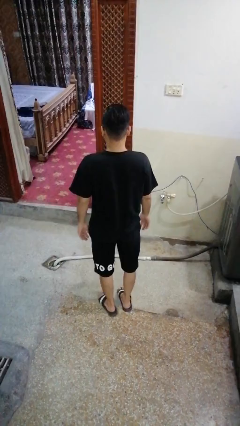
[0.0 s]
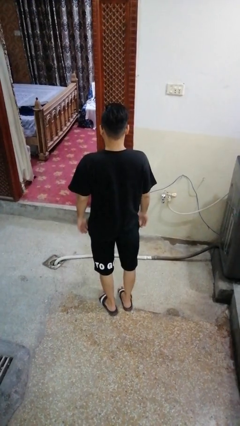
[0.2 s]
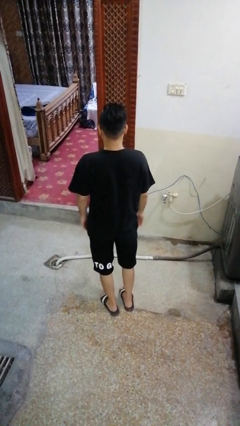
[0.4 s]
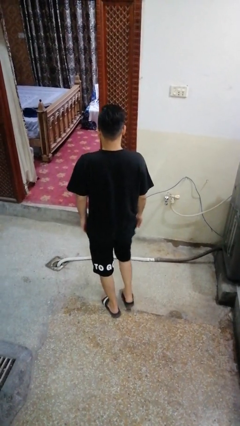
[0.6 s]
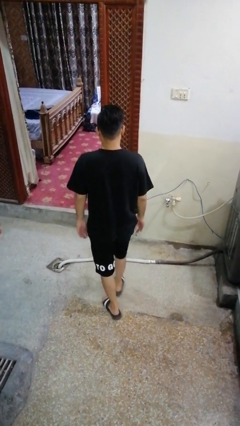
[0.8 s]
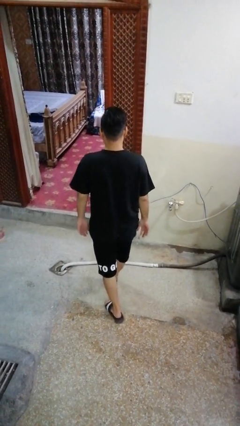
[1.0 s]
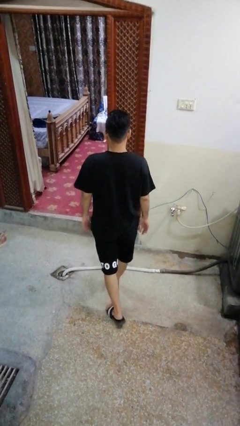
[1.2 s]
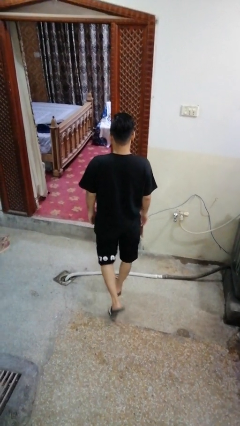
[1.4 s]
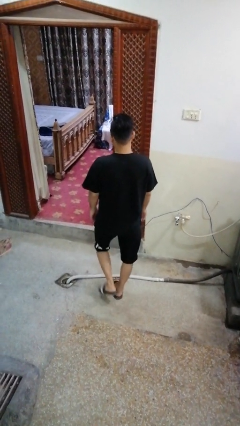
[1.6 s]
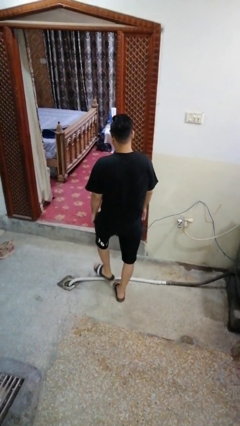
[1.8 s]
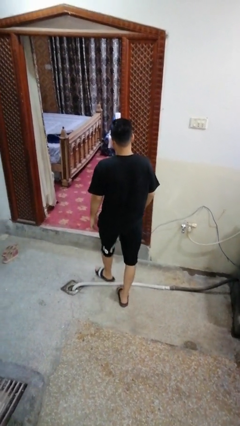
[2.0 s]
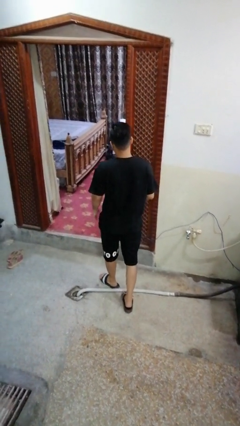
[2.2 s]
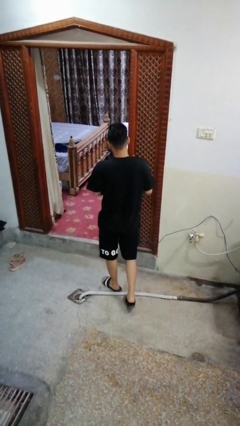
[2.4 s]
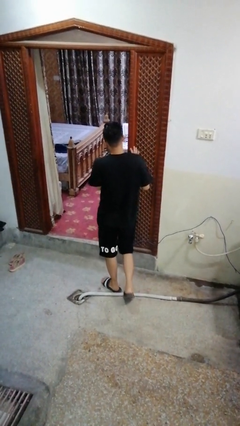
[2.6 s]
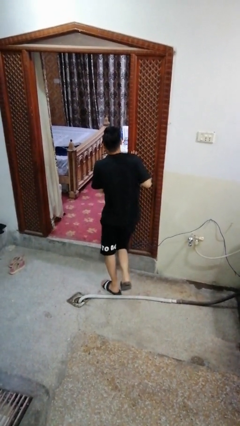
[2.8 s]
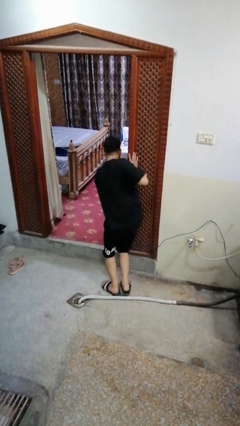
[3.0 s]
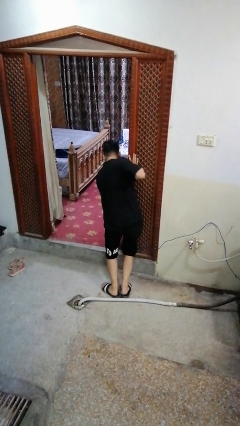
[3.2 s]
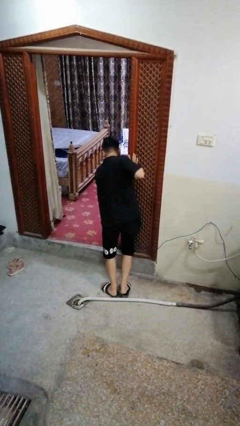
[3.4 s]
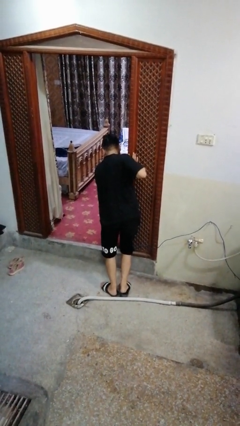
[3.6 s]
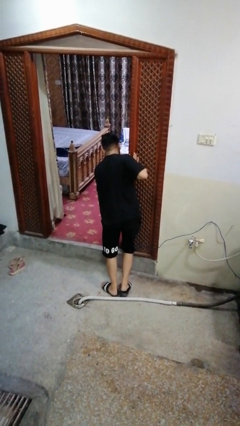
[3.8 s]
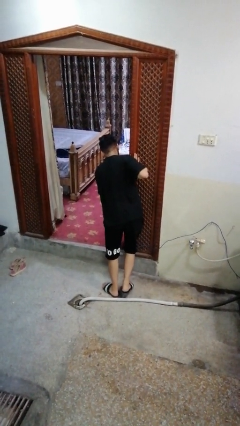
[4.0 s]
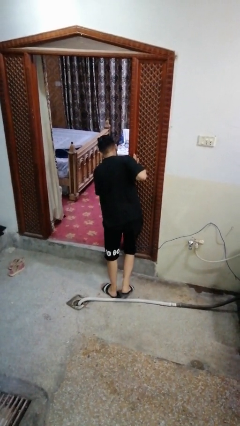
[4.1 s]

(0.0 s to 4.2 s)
person bumps into wall

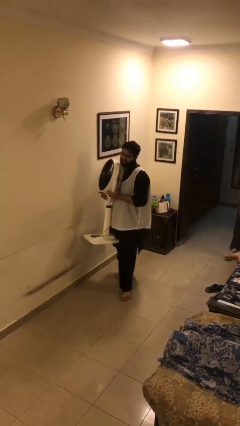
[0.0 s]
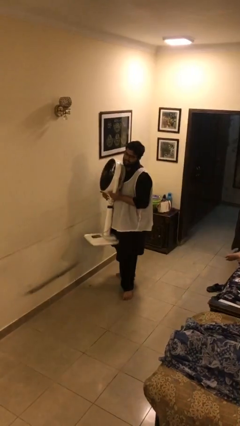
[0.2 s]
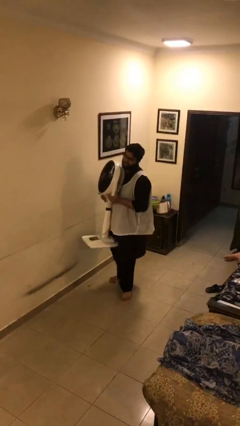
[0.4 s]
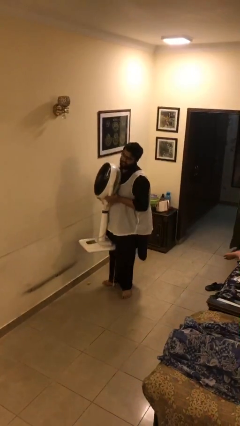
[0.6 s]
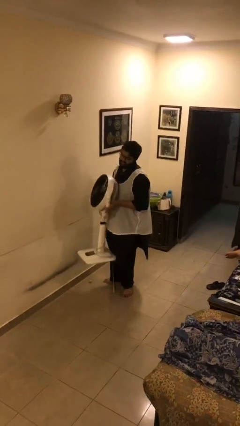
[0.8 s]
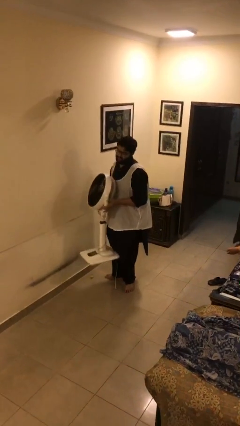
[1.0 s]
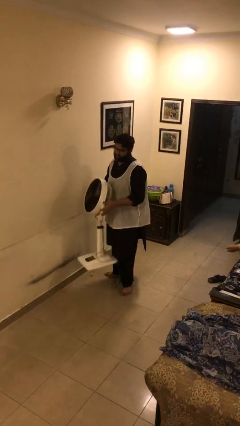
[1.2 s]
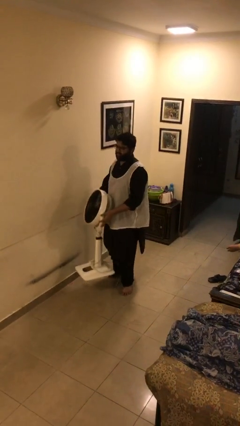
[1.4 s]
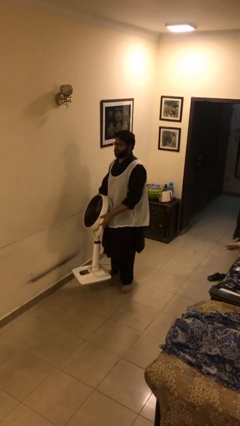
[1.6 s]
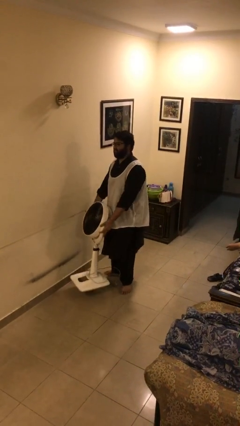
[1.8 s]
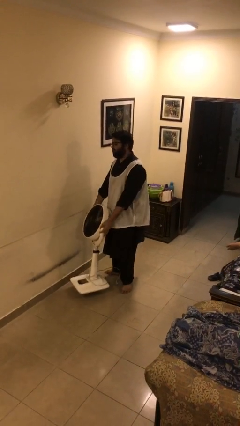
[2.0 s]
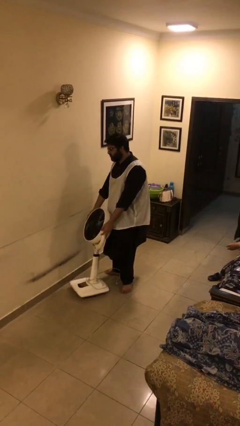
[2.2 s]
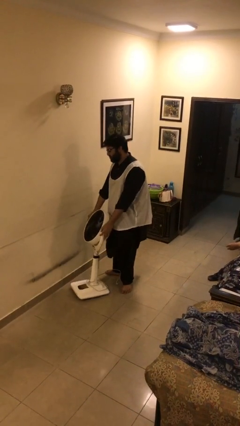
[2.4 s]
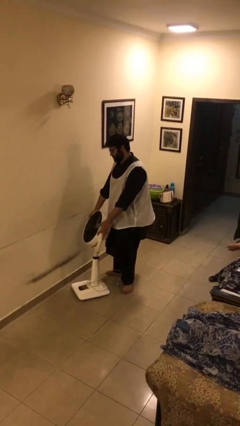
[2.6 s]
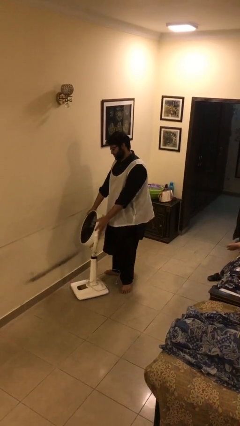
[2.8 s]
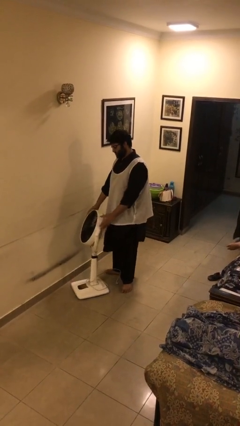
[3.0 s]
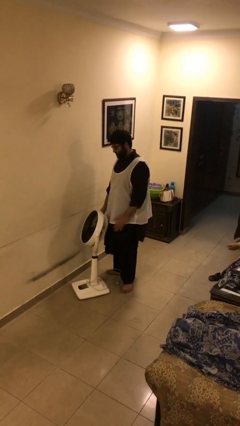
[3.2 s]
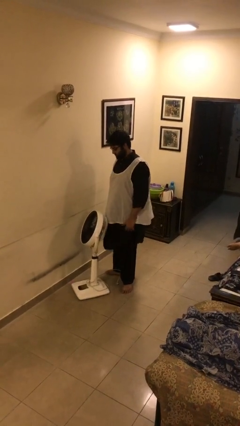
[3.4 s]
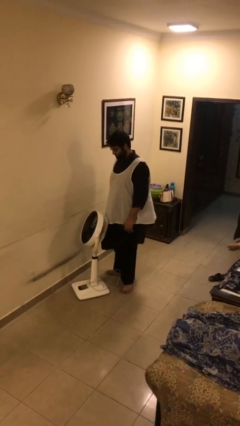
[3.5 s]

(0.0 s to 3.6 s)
person puts down object on floor

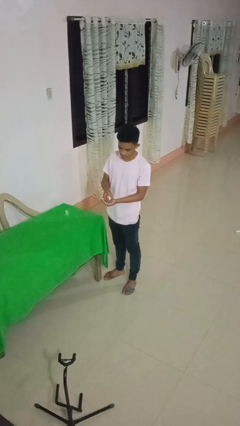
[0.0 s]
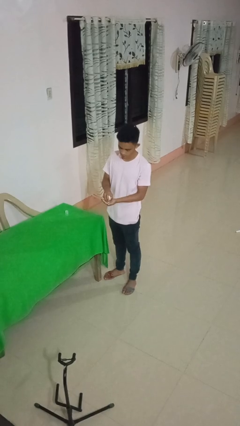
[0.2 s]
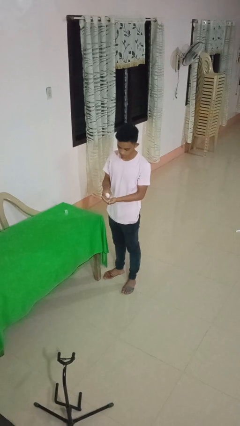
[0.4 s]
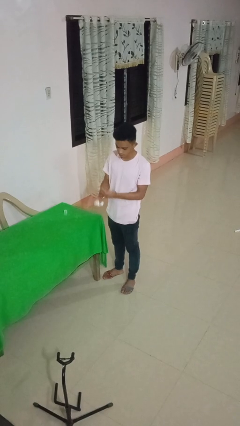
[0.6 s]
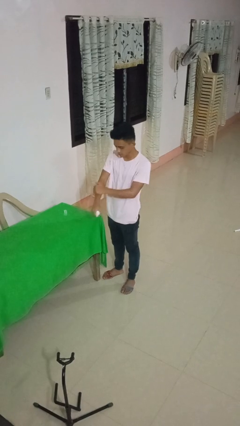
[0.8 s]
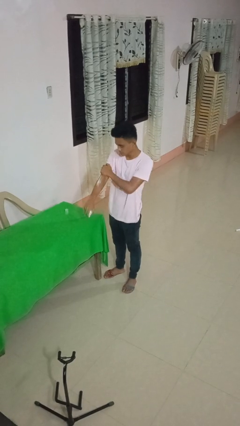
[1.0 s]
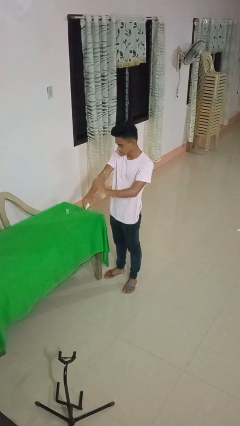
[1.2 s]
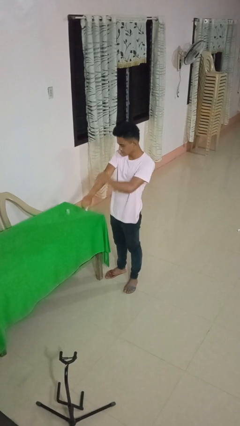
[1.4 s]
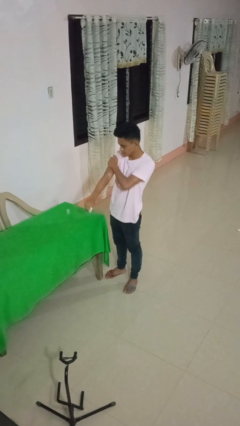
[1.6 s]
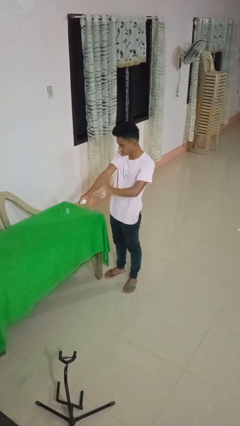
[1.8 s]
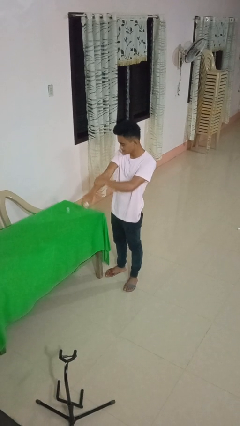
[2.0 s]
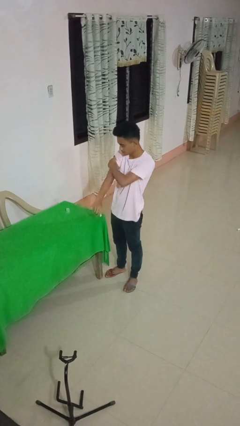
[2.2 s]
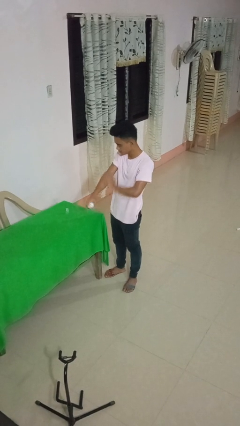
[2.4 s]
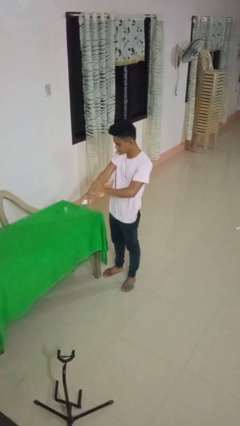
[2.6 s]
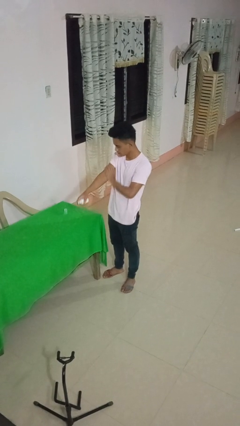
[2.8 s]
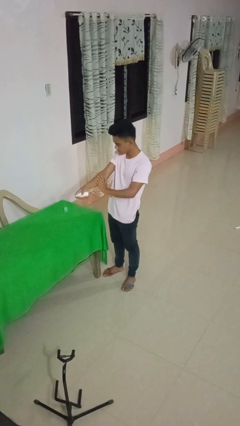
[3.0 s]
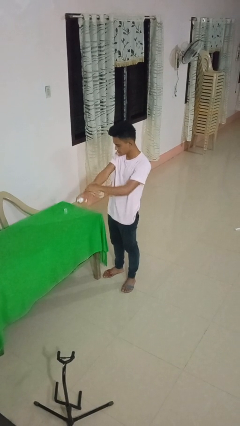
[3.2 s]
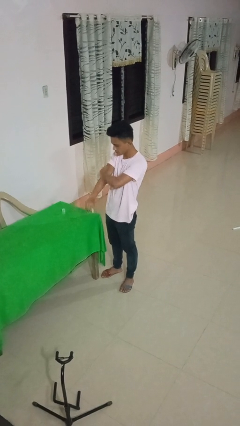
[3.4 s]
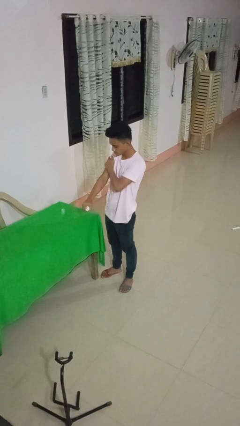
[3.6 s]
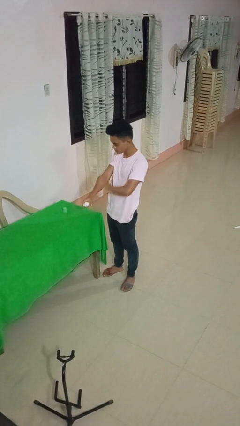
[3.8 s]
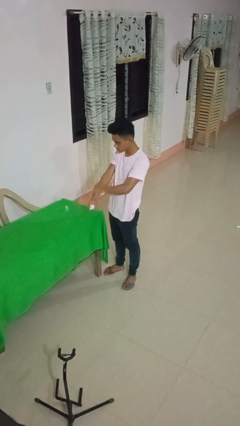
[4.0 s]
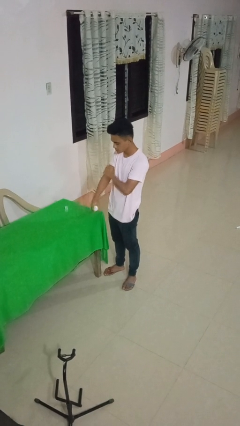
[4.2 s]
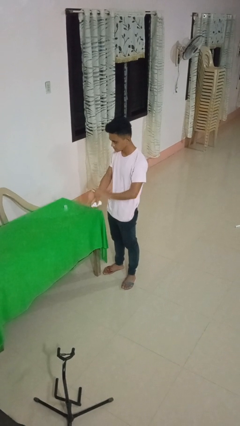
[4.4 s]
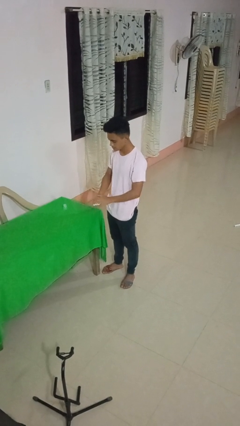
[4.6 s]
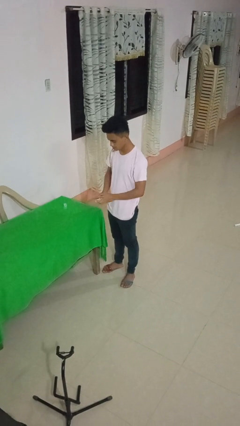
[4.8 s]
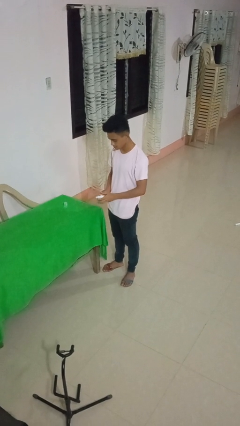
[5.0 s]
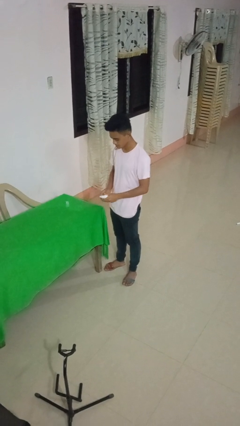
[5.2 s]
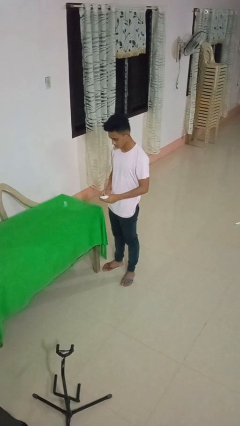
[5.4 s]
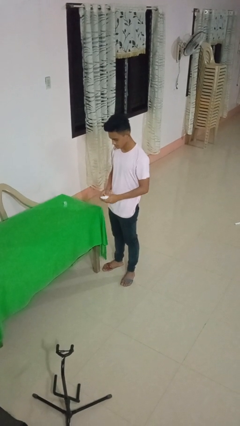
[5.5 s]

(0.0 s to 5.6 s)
person applies sunscreen

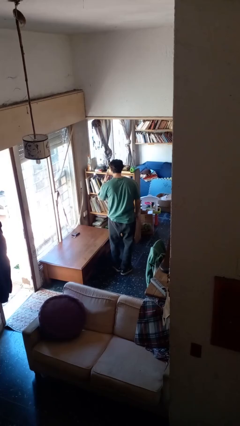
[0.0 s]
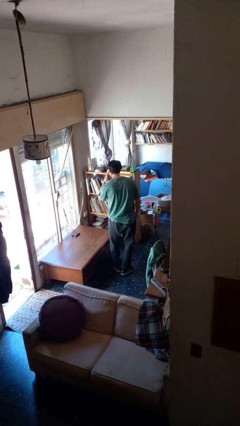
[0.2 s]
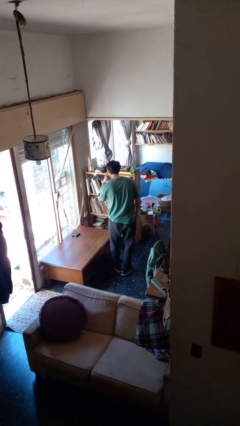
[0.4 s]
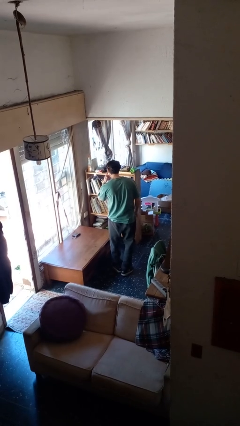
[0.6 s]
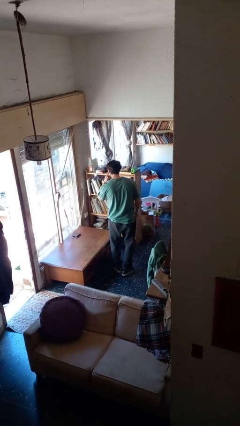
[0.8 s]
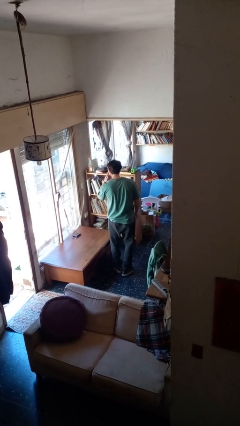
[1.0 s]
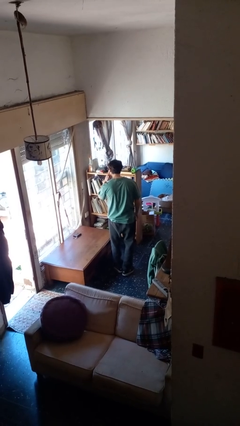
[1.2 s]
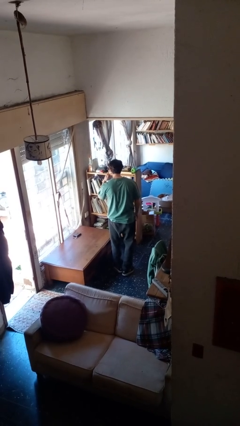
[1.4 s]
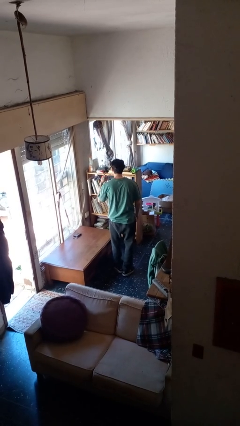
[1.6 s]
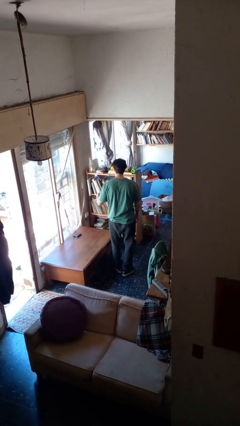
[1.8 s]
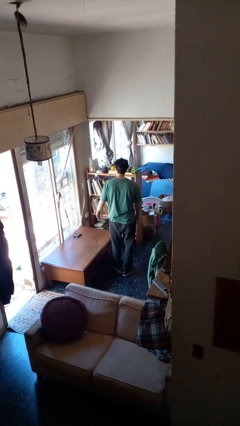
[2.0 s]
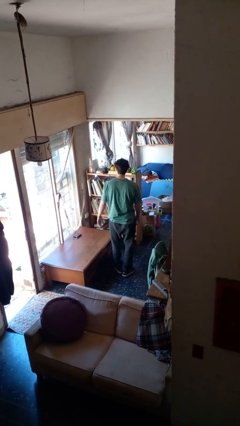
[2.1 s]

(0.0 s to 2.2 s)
person gestures listen closely

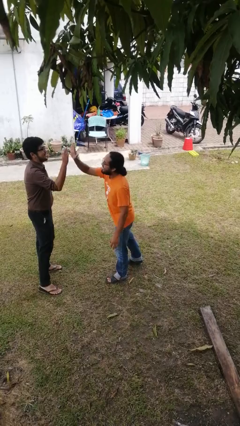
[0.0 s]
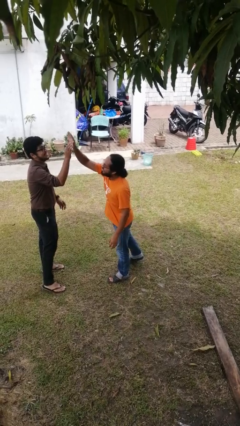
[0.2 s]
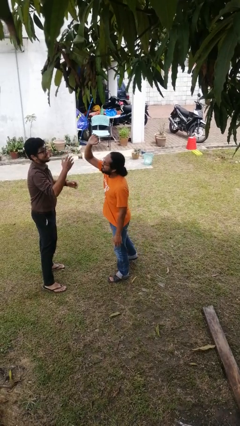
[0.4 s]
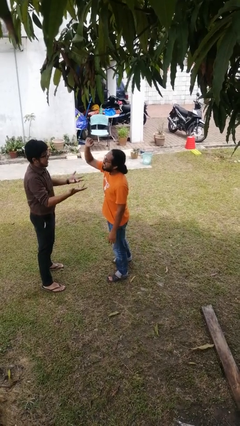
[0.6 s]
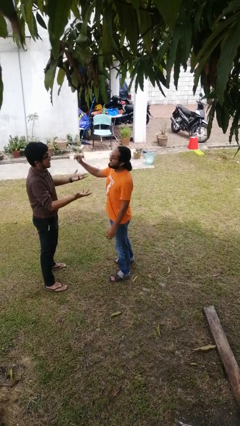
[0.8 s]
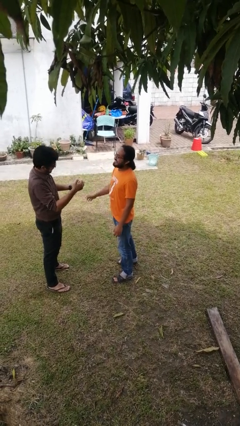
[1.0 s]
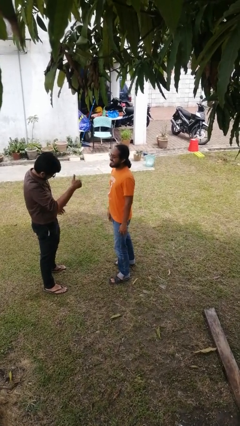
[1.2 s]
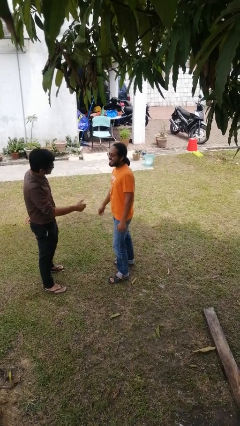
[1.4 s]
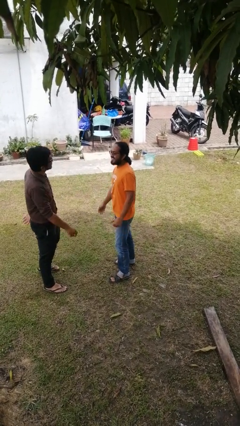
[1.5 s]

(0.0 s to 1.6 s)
person highfives hand

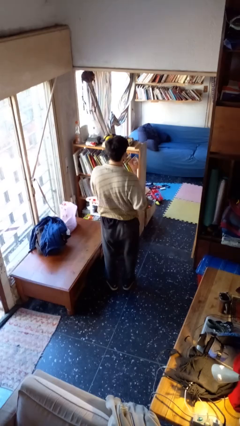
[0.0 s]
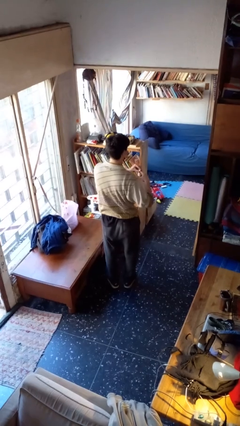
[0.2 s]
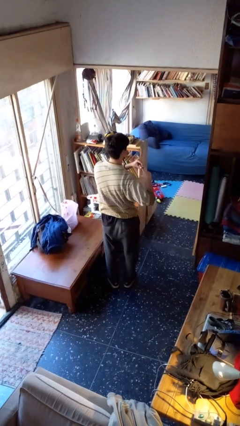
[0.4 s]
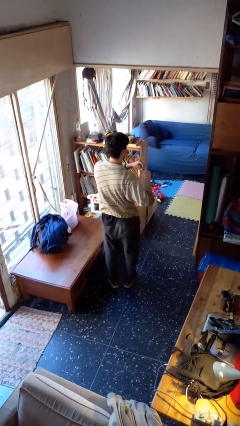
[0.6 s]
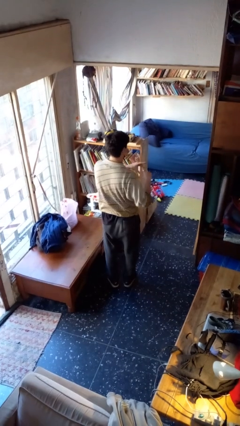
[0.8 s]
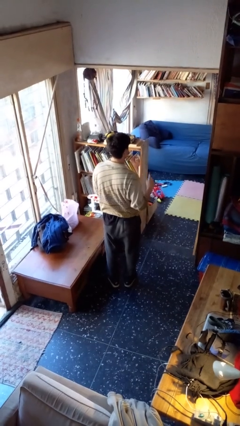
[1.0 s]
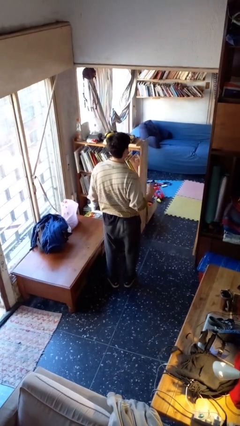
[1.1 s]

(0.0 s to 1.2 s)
person puts on ring
